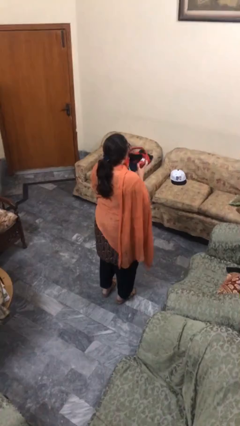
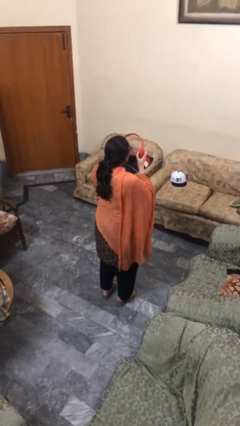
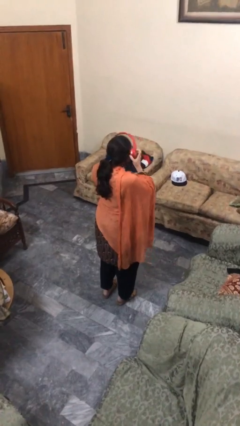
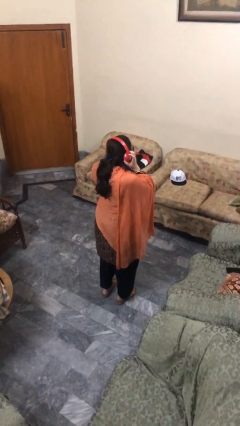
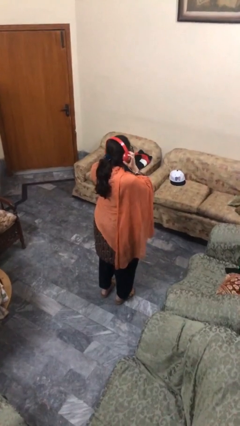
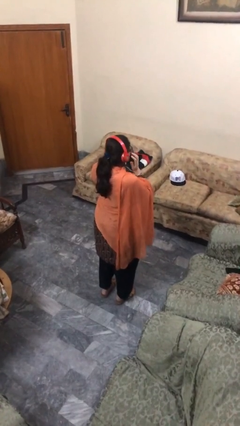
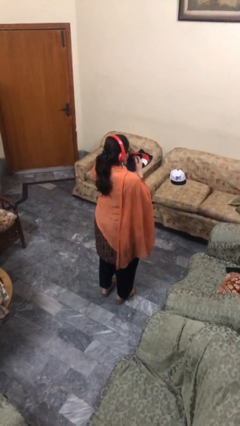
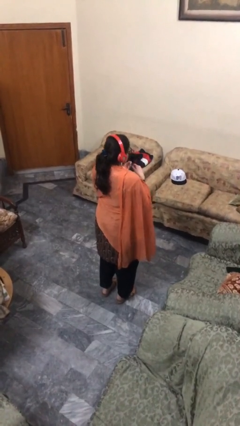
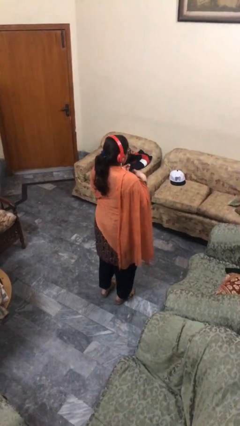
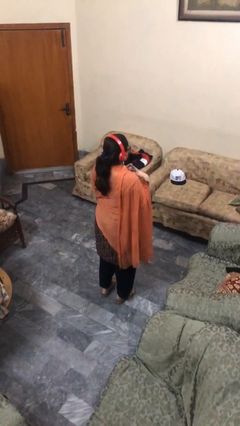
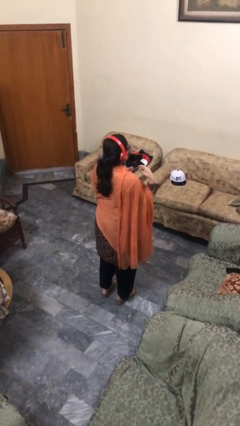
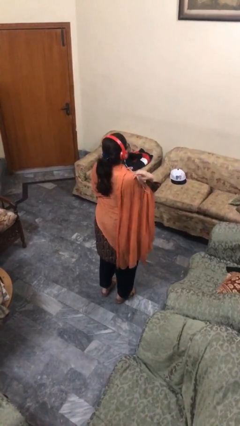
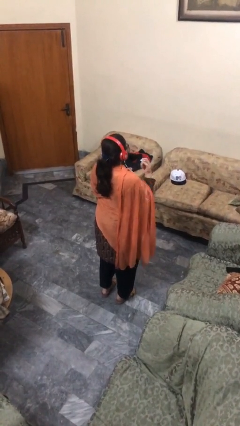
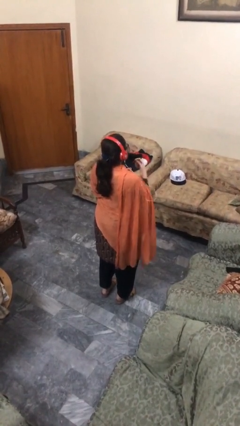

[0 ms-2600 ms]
person puts on headphones

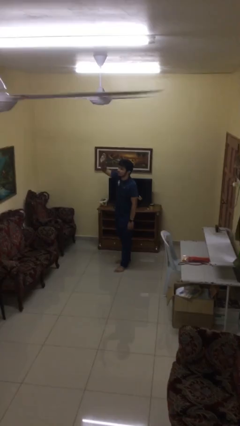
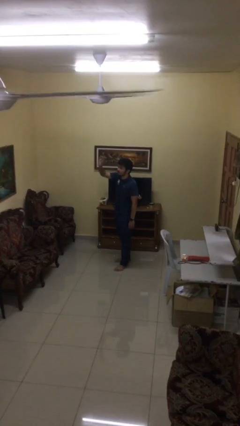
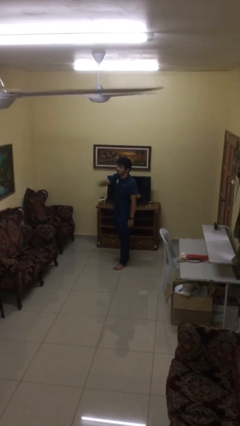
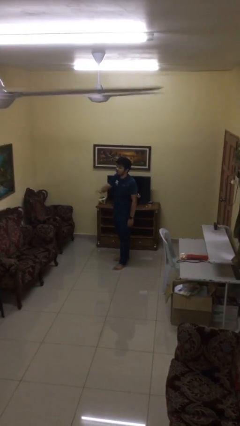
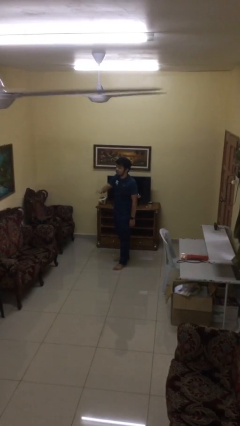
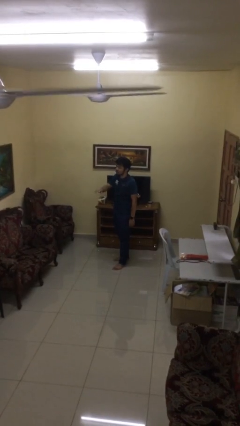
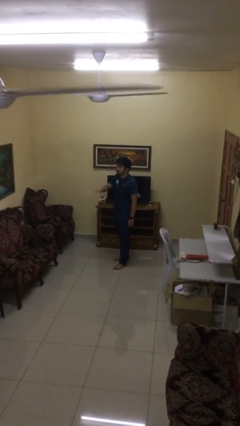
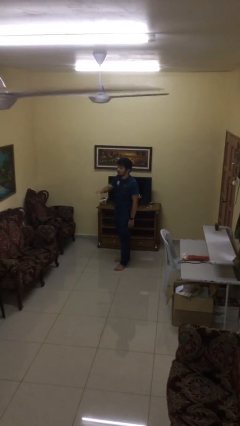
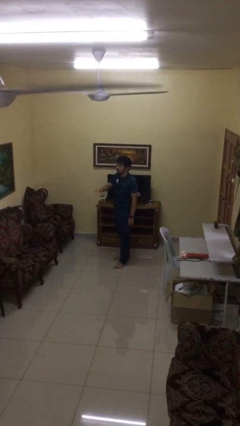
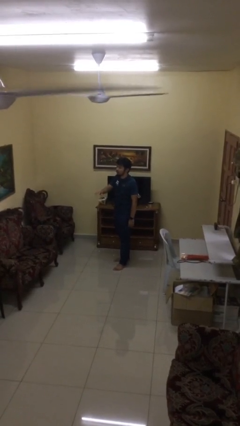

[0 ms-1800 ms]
person gestures swipe down

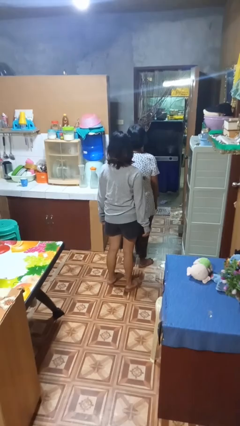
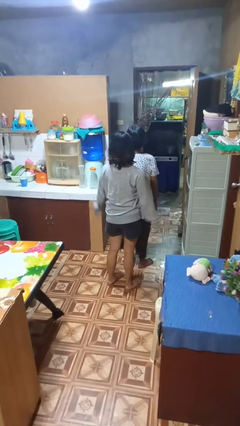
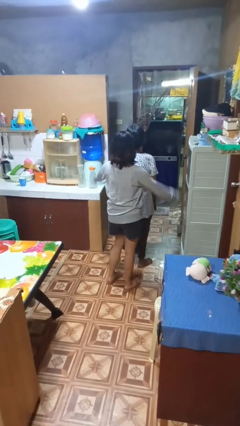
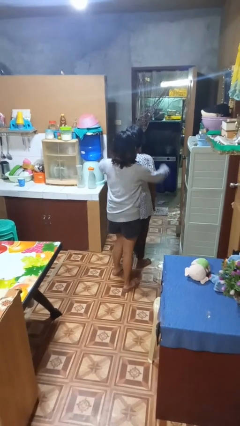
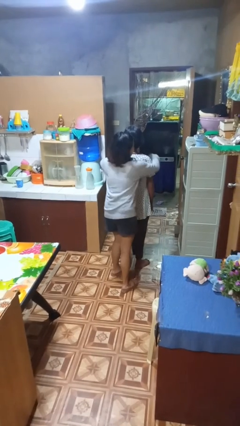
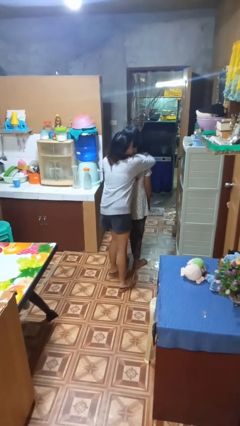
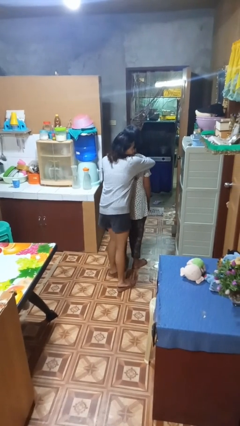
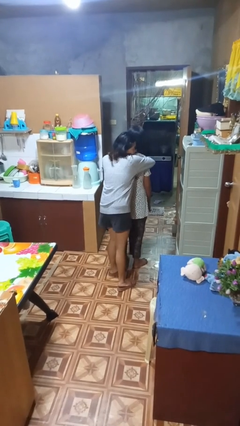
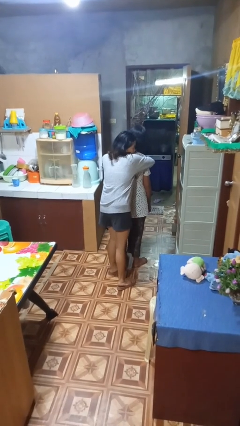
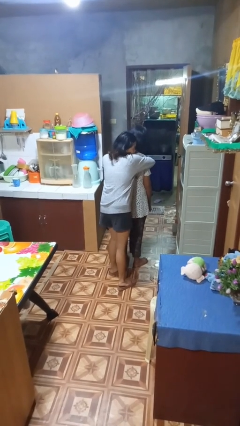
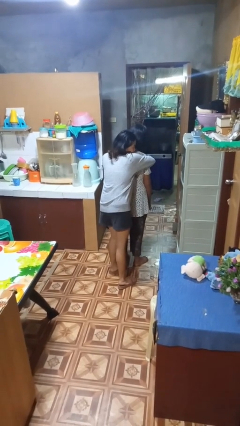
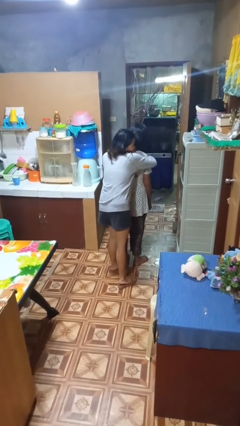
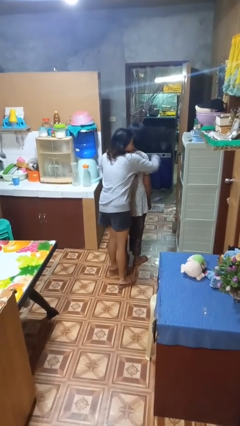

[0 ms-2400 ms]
person hugs person from behind

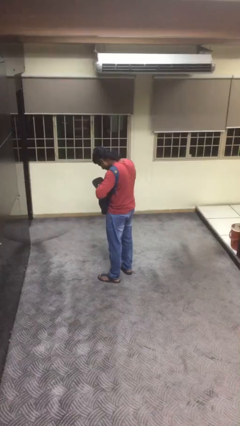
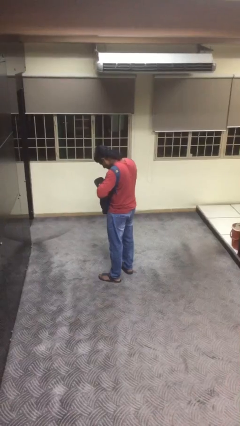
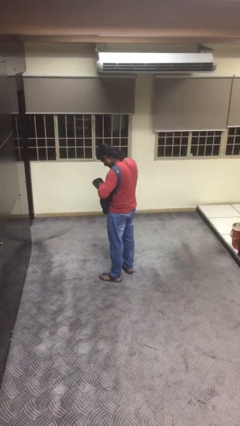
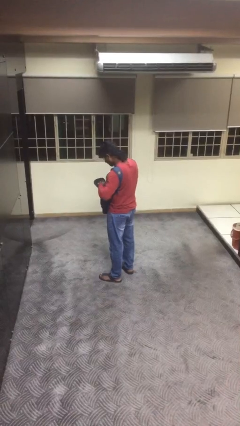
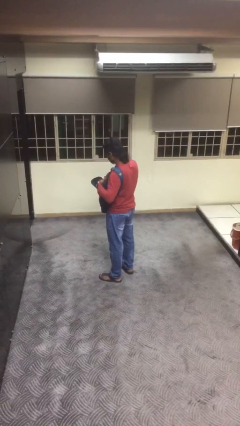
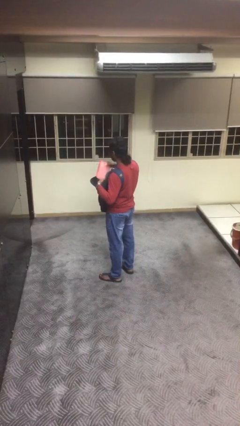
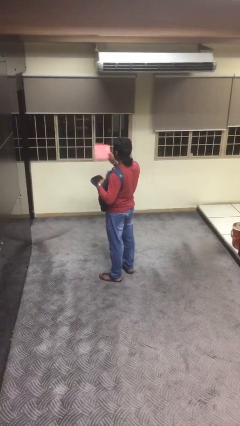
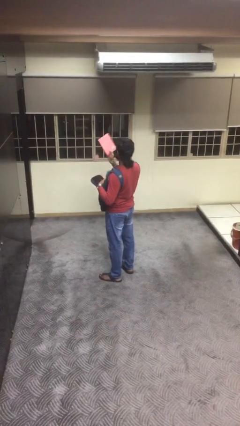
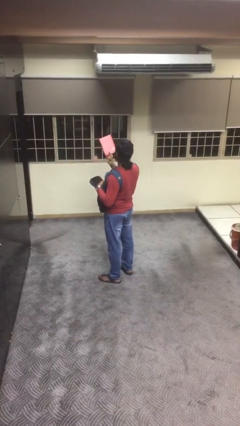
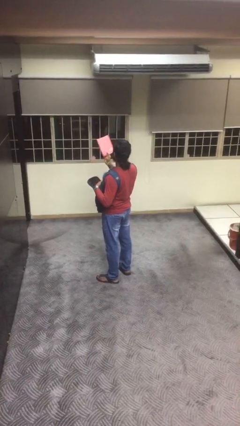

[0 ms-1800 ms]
person takes object from backpack

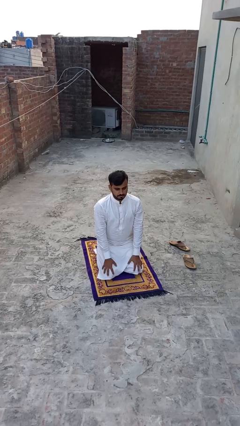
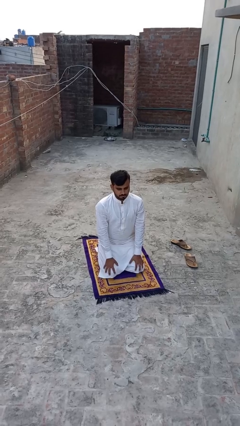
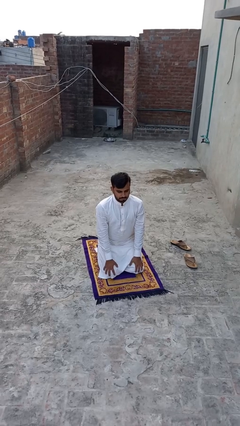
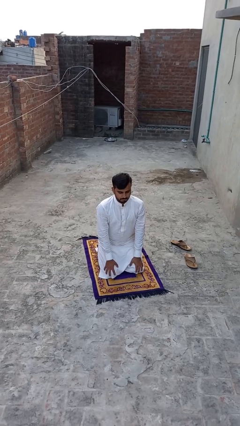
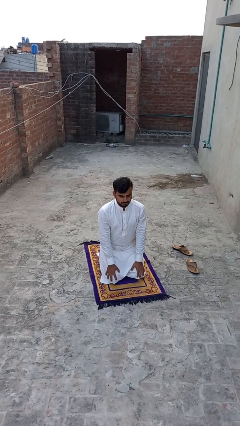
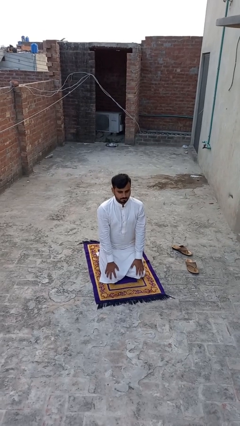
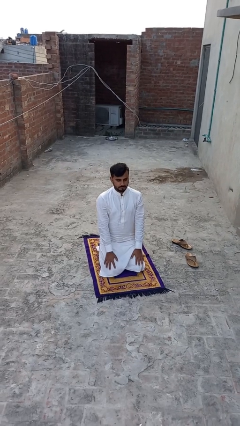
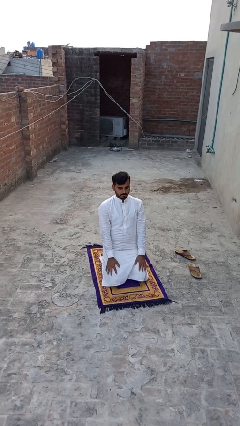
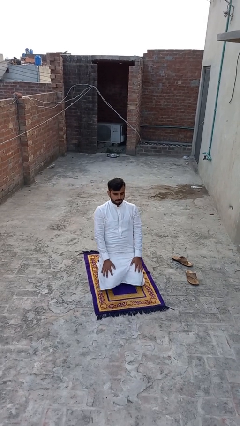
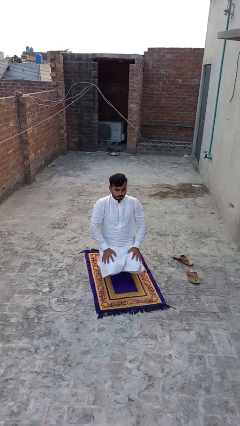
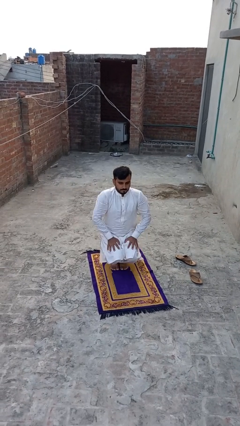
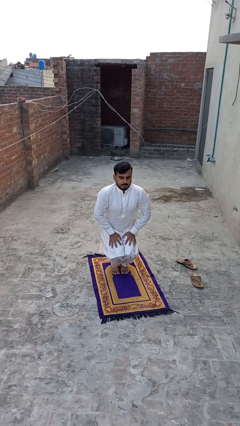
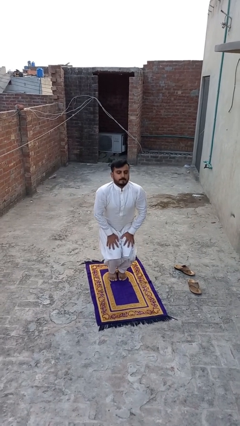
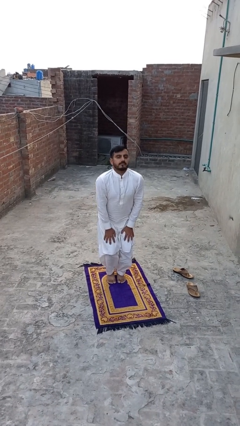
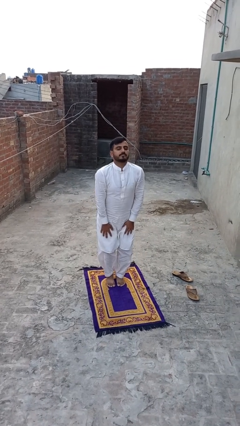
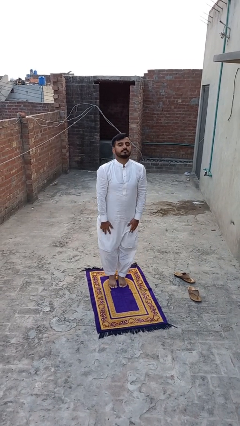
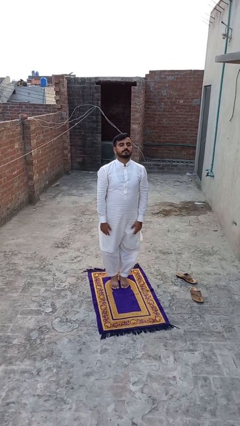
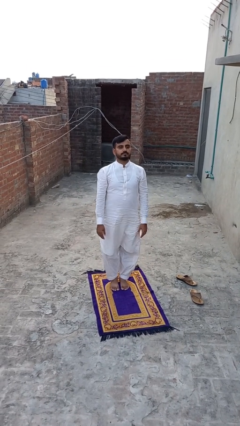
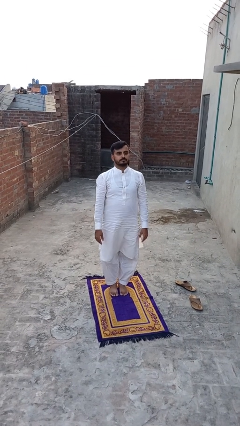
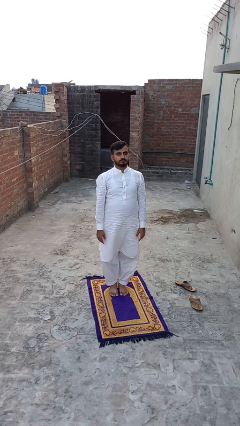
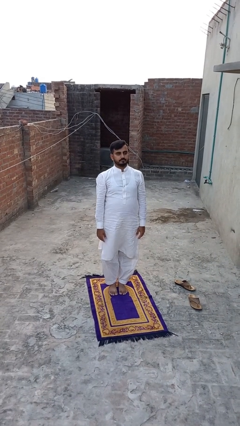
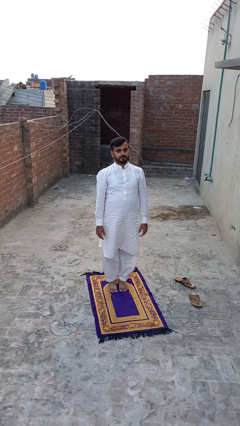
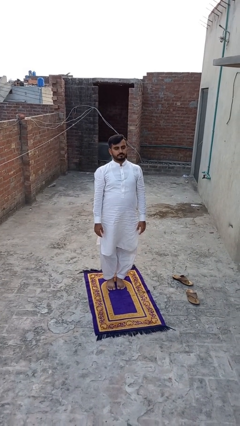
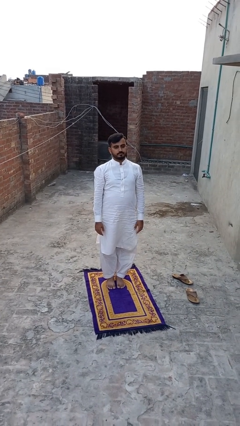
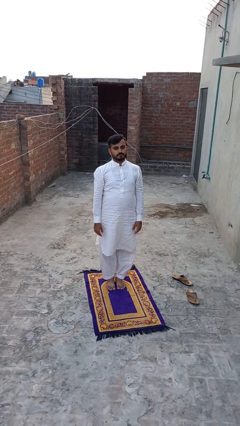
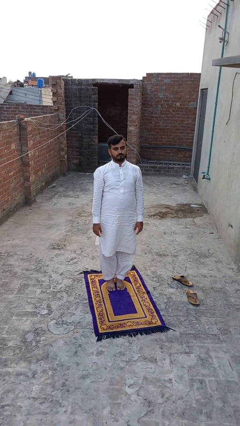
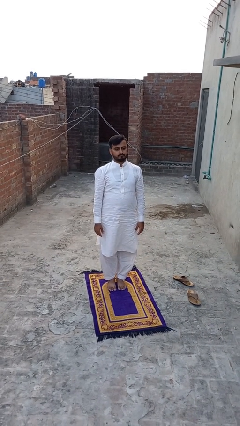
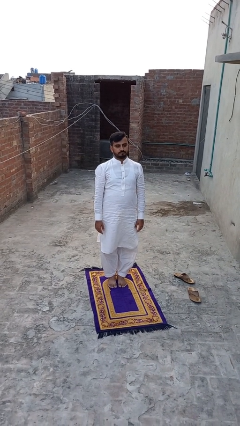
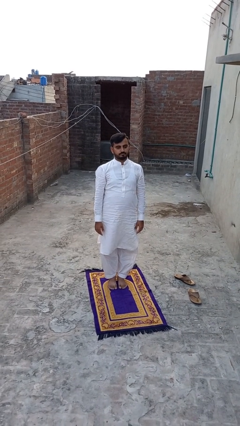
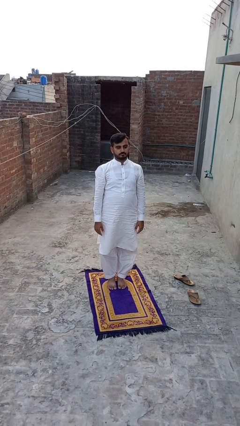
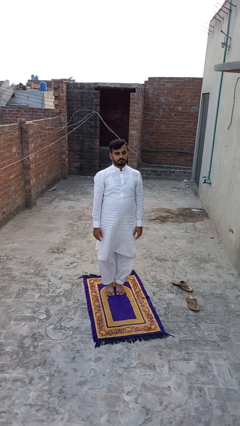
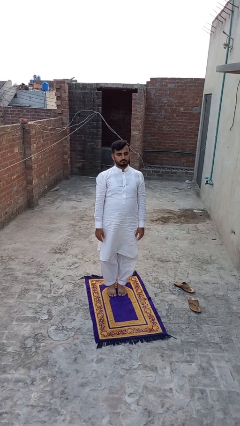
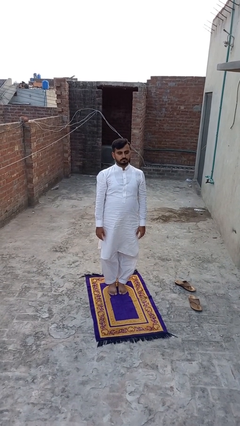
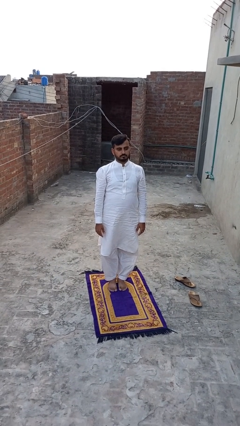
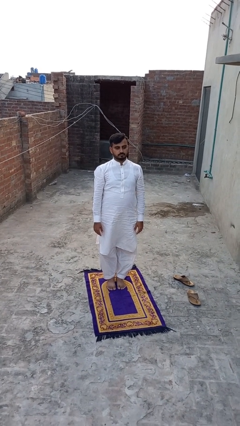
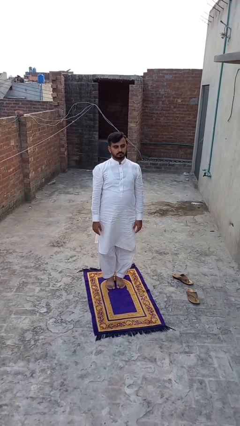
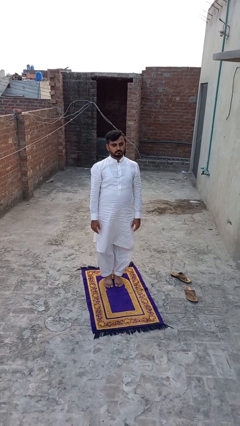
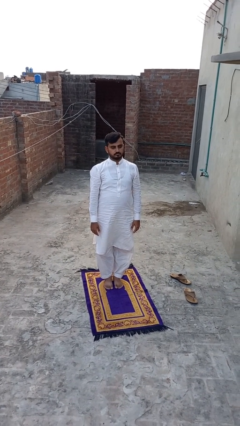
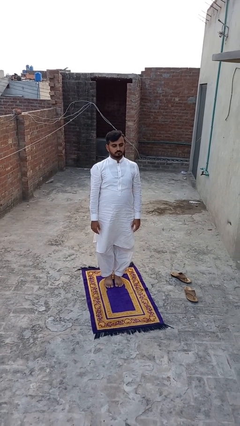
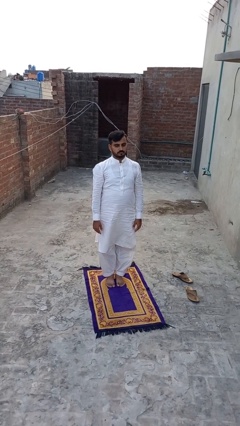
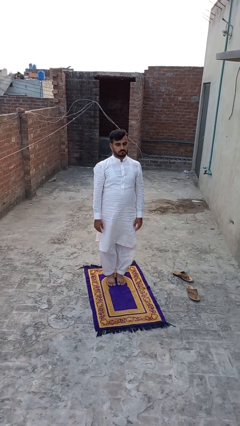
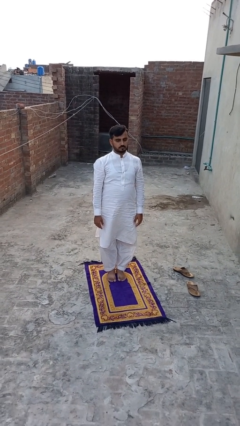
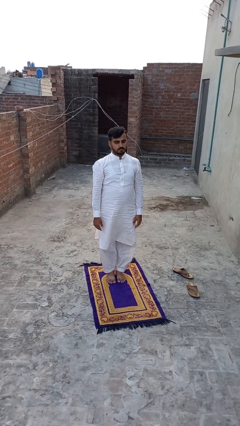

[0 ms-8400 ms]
person stands up from floor

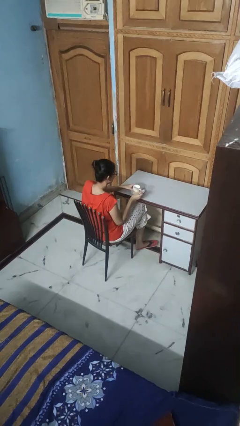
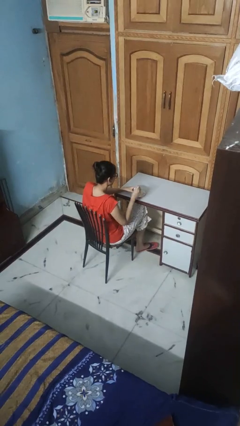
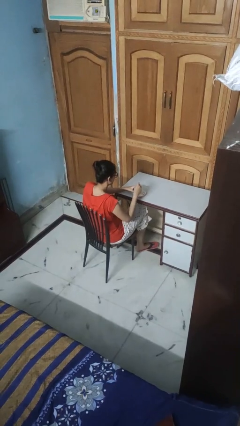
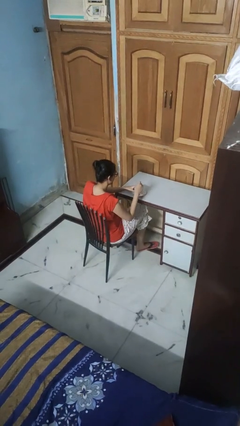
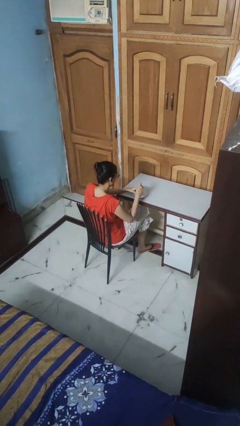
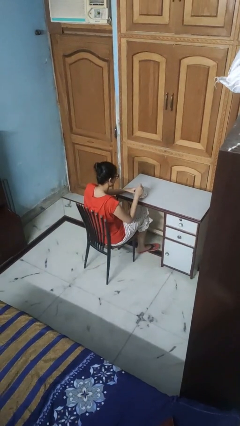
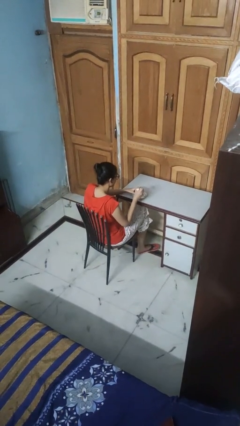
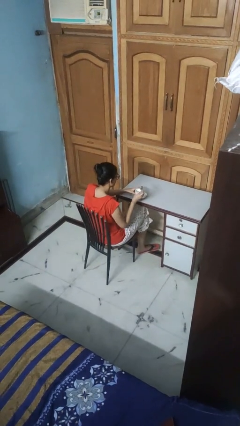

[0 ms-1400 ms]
person stirs mug
